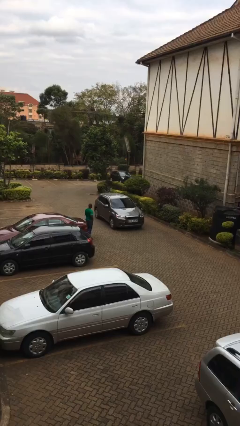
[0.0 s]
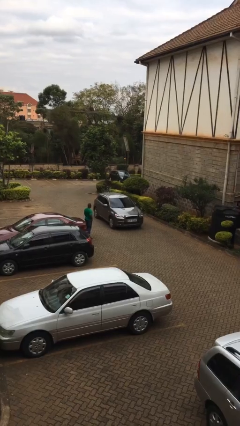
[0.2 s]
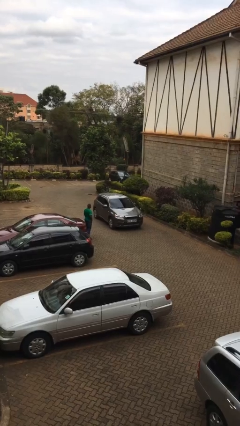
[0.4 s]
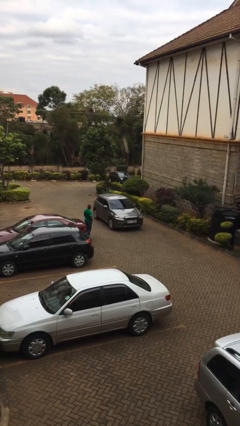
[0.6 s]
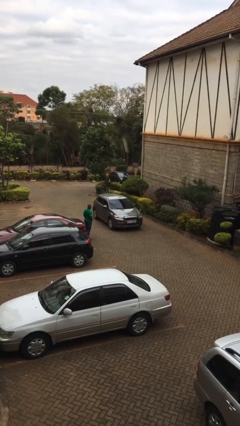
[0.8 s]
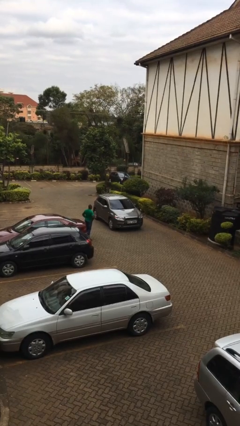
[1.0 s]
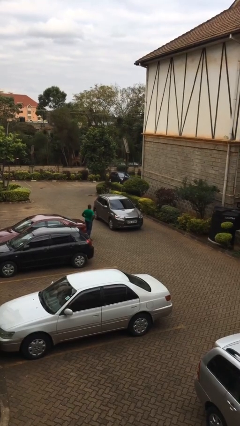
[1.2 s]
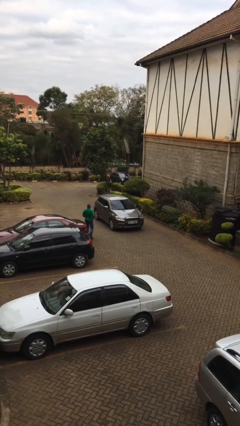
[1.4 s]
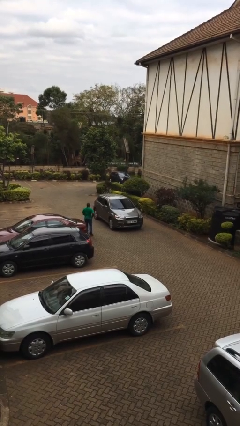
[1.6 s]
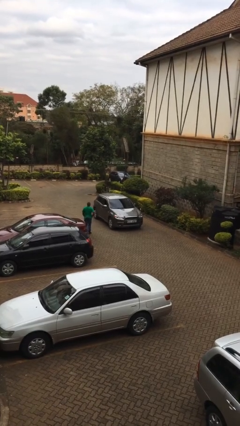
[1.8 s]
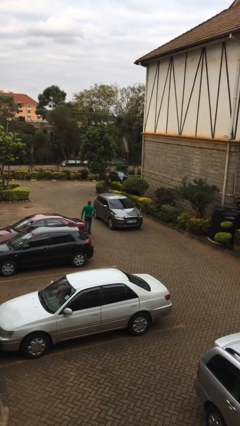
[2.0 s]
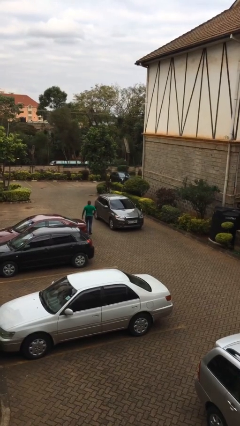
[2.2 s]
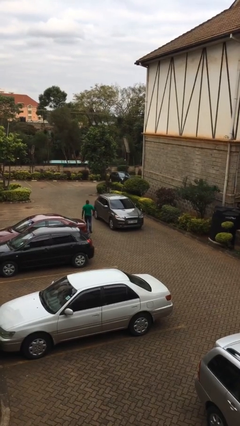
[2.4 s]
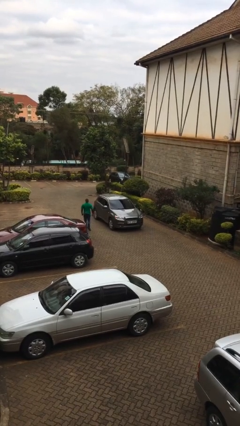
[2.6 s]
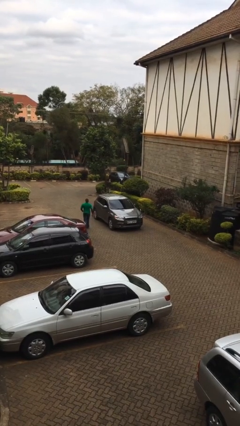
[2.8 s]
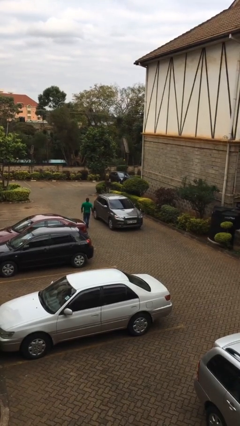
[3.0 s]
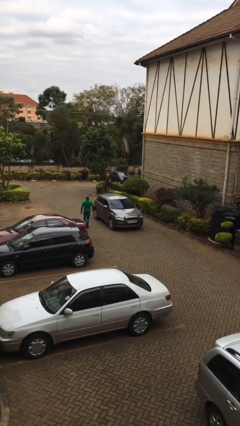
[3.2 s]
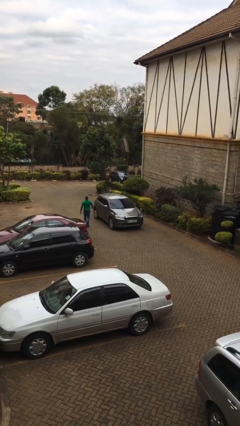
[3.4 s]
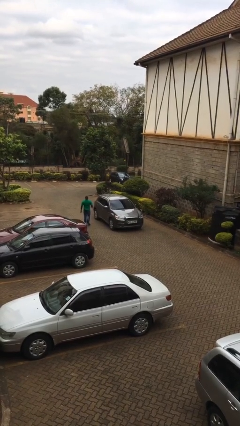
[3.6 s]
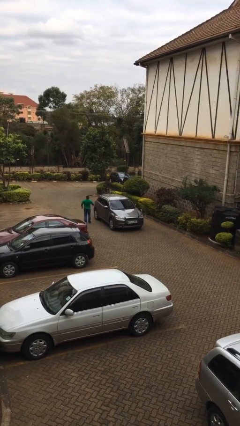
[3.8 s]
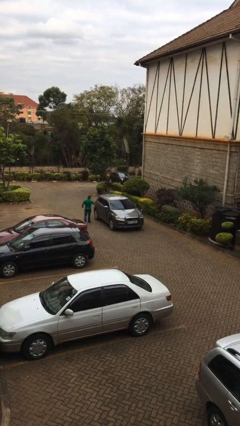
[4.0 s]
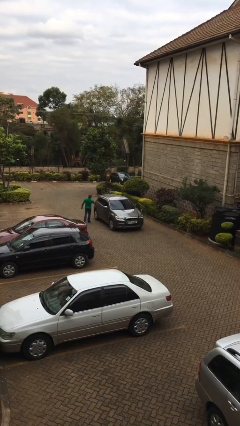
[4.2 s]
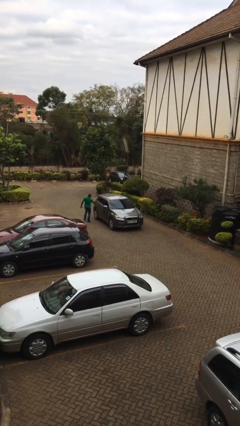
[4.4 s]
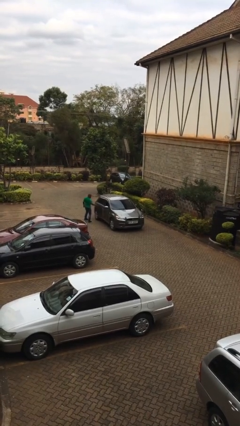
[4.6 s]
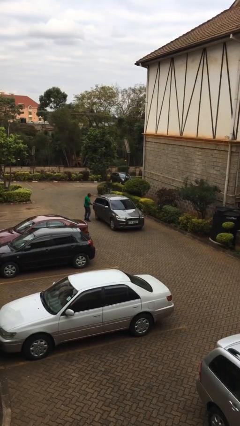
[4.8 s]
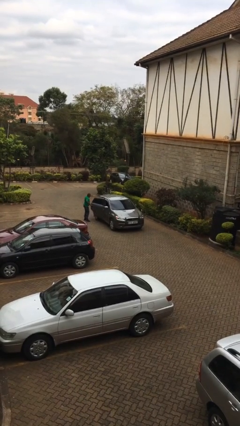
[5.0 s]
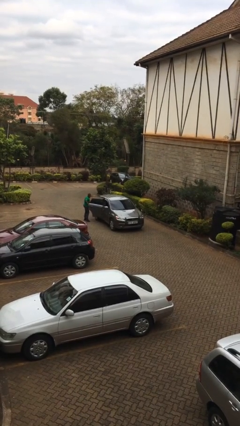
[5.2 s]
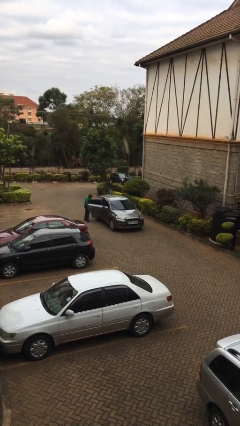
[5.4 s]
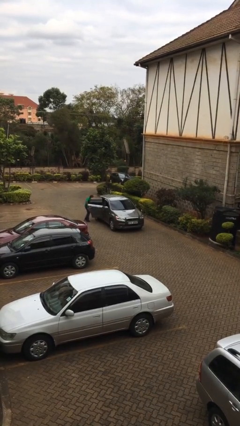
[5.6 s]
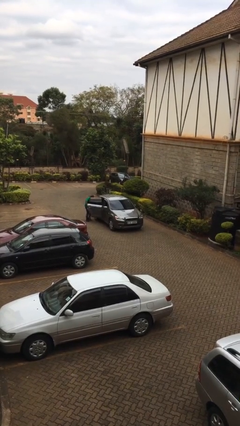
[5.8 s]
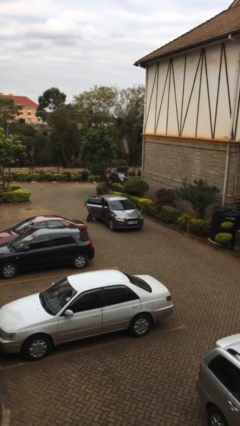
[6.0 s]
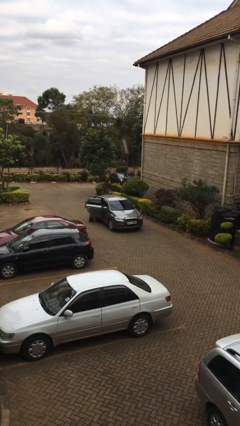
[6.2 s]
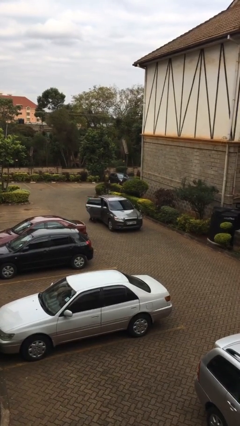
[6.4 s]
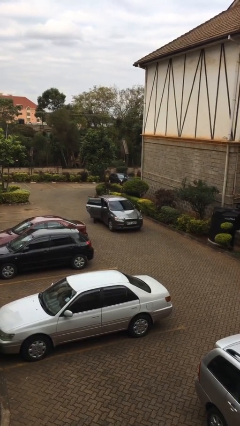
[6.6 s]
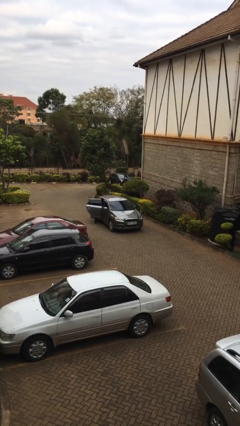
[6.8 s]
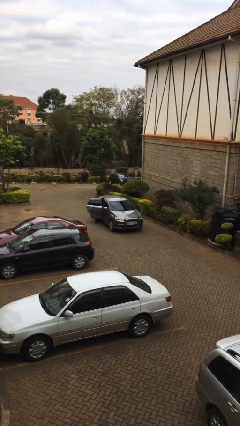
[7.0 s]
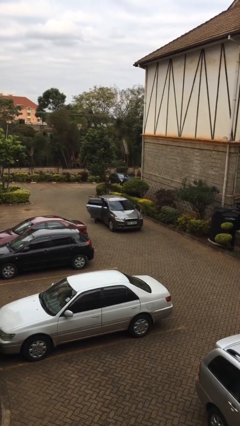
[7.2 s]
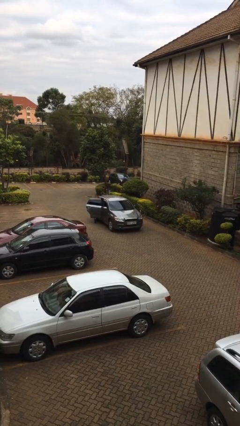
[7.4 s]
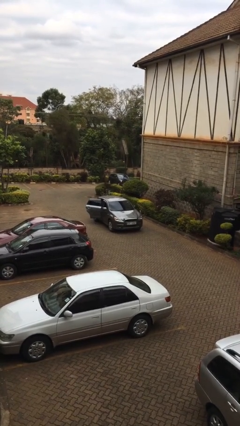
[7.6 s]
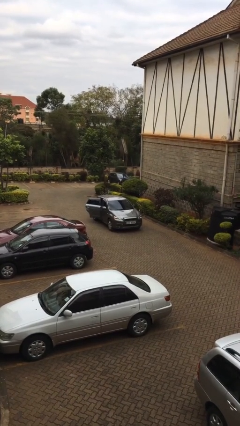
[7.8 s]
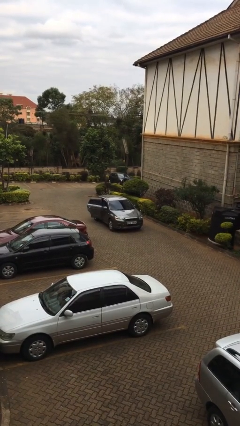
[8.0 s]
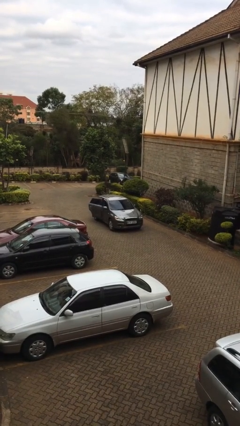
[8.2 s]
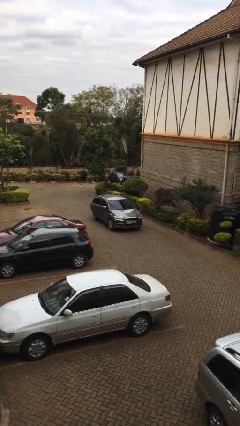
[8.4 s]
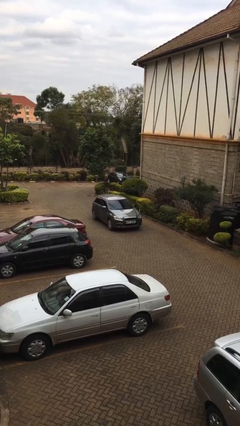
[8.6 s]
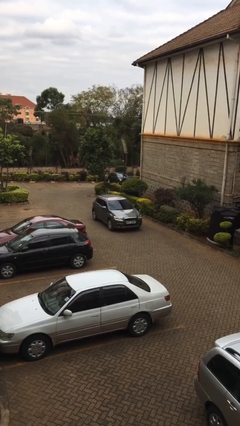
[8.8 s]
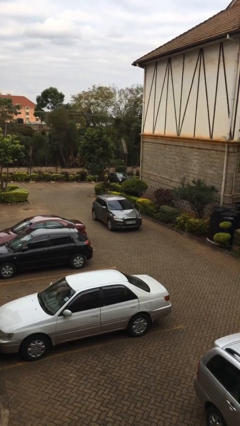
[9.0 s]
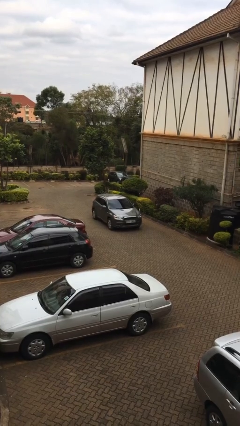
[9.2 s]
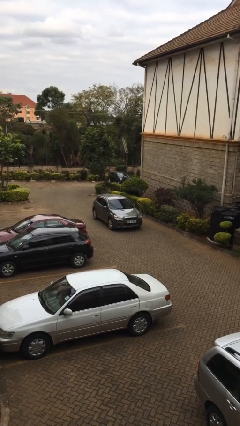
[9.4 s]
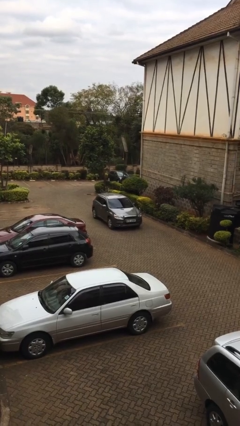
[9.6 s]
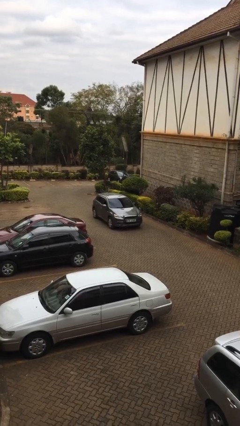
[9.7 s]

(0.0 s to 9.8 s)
car picks up person

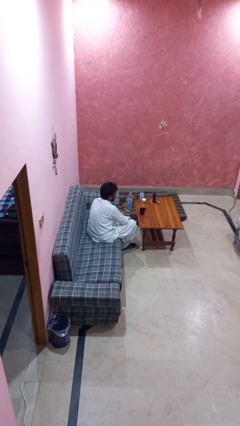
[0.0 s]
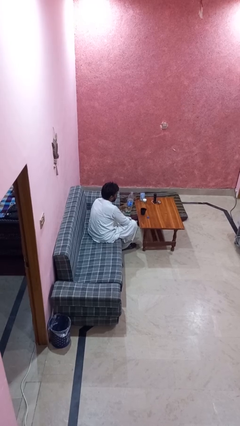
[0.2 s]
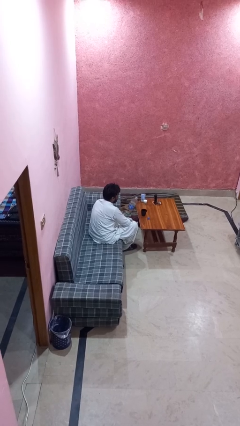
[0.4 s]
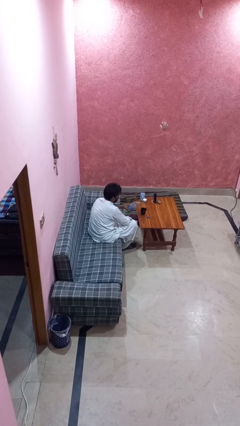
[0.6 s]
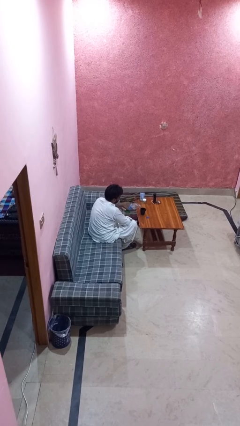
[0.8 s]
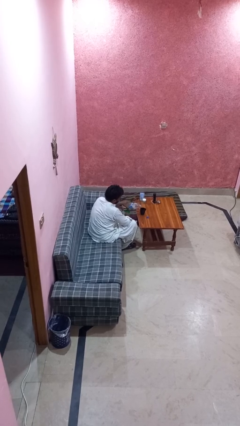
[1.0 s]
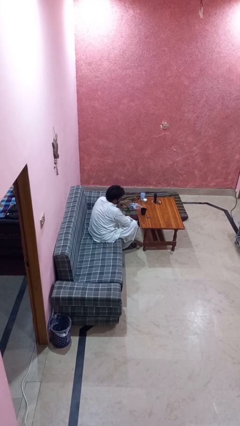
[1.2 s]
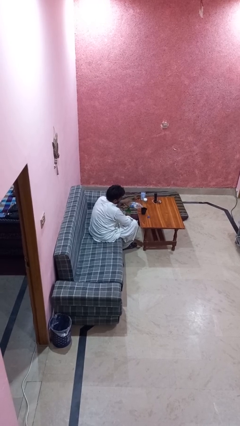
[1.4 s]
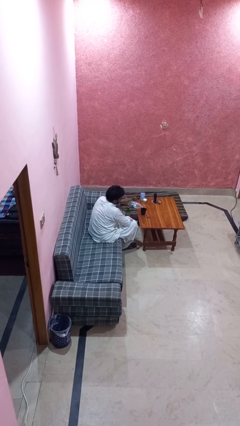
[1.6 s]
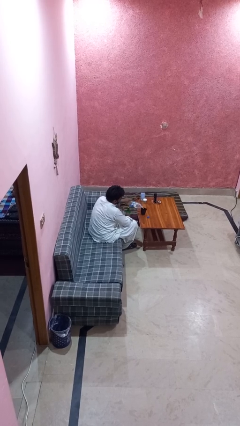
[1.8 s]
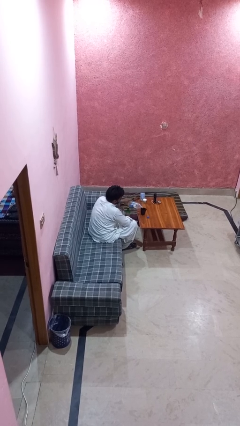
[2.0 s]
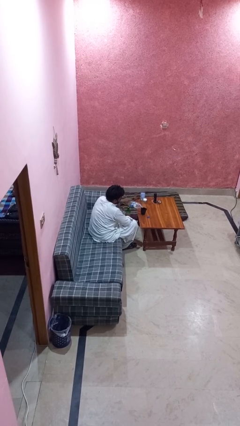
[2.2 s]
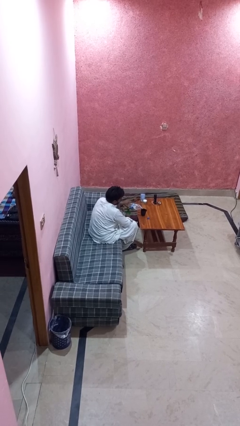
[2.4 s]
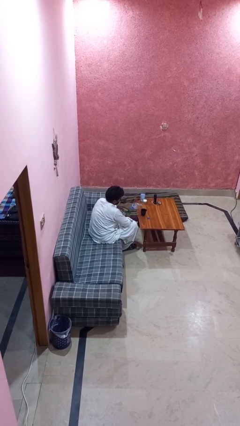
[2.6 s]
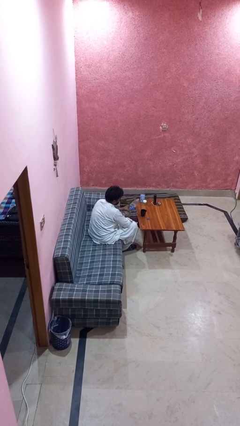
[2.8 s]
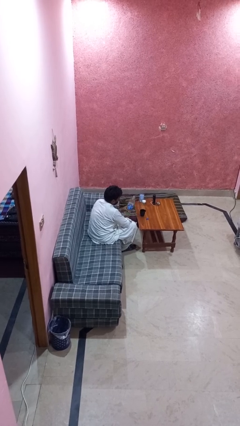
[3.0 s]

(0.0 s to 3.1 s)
person pours liquid into cup

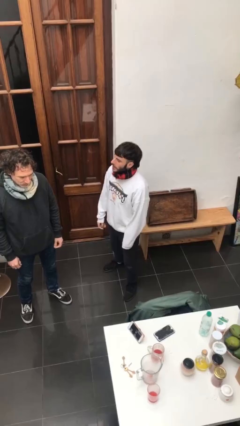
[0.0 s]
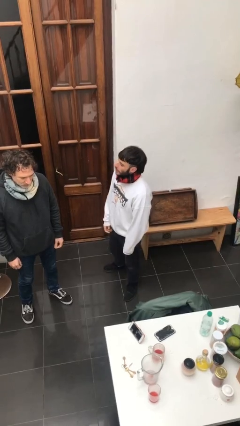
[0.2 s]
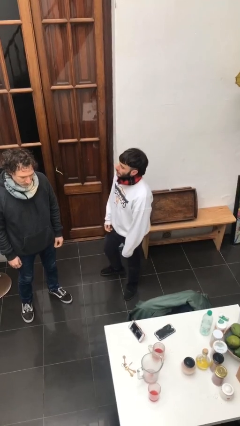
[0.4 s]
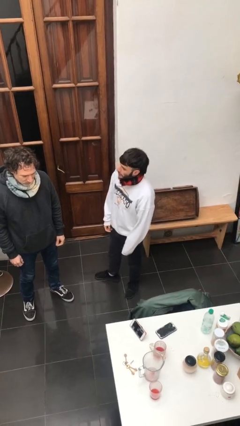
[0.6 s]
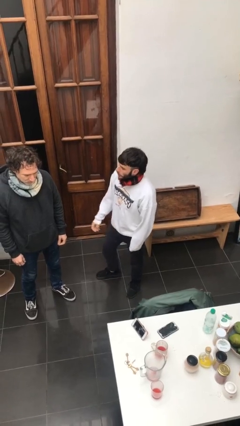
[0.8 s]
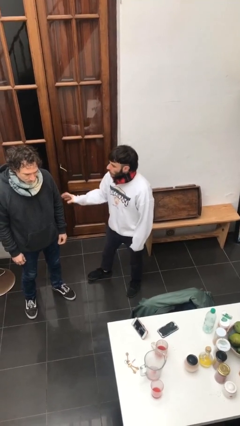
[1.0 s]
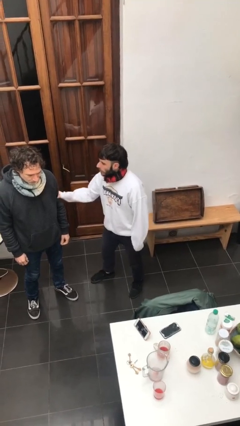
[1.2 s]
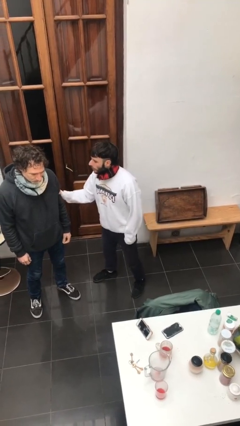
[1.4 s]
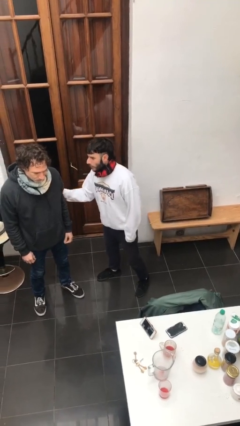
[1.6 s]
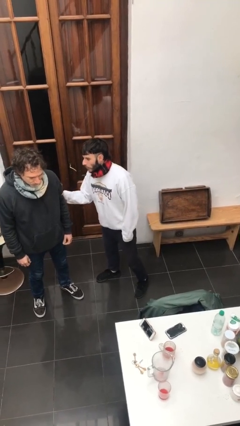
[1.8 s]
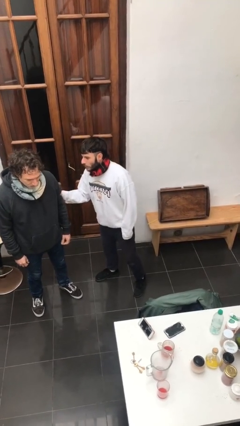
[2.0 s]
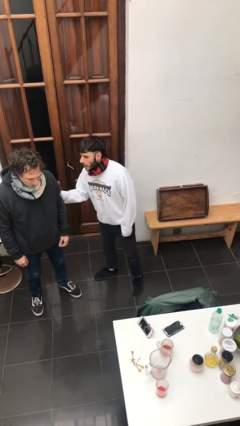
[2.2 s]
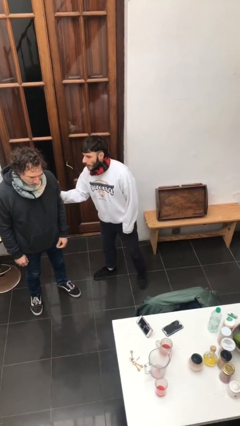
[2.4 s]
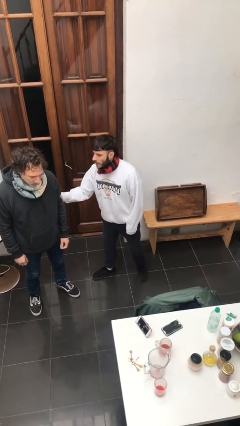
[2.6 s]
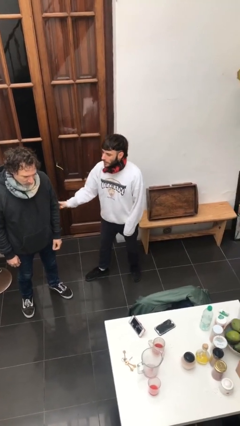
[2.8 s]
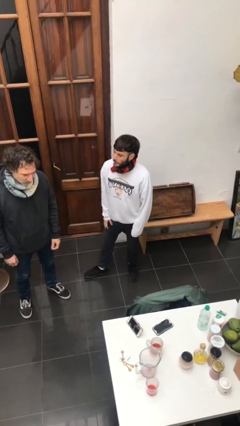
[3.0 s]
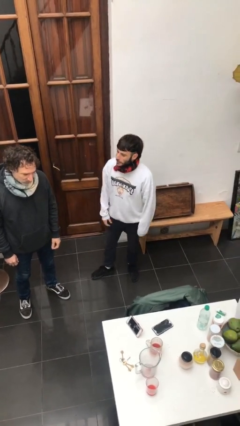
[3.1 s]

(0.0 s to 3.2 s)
person grabs person by bicep

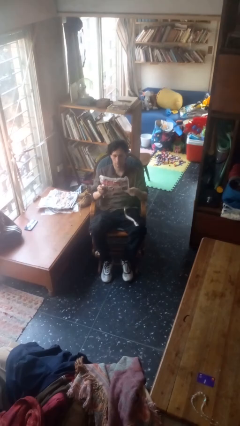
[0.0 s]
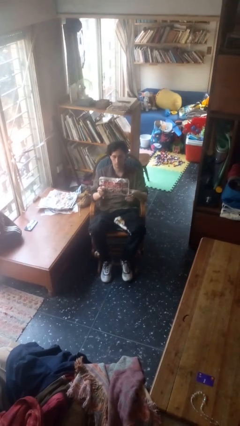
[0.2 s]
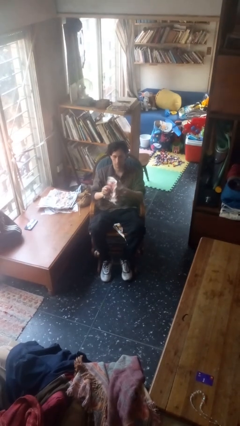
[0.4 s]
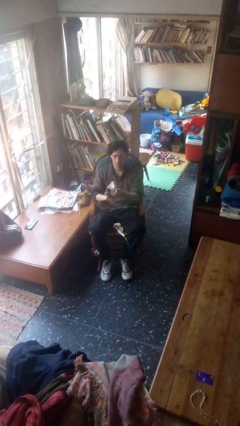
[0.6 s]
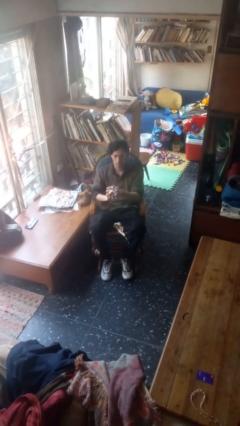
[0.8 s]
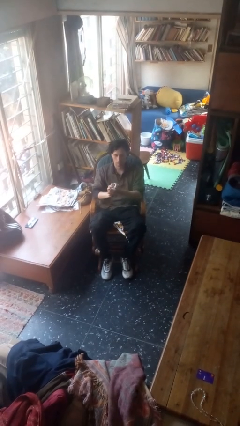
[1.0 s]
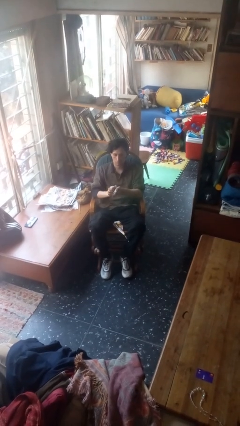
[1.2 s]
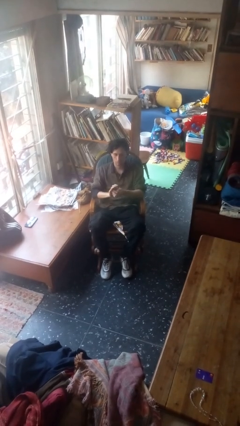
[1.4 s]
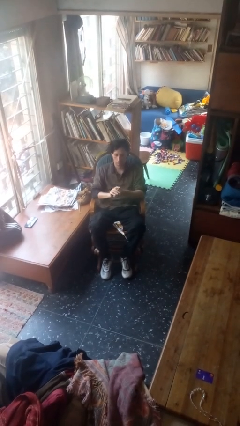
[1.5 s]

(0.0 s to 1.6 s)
person crumples paper

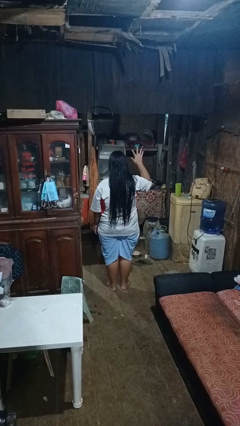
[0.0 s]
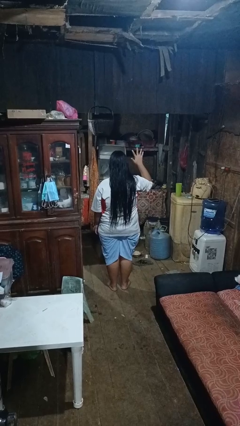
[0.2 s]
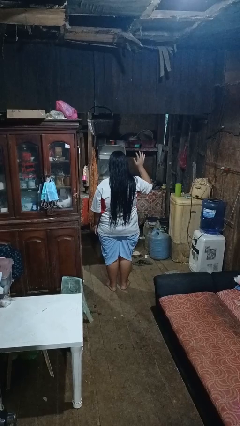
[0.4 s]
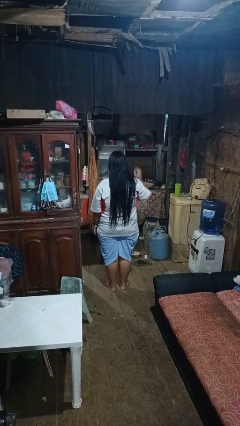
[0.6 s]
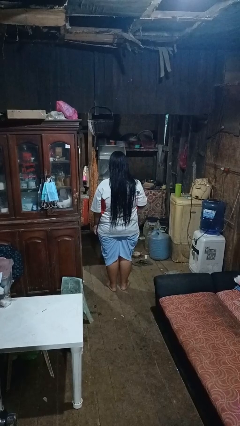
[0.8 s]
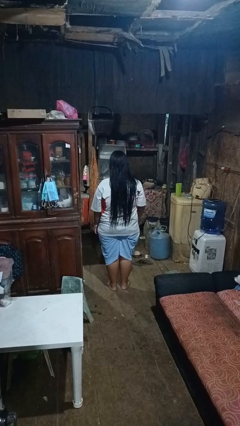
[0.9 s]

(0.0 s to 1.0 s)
person gestures number five
